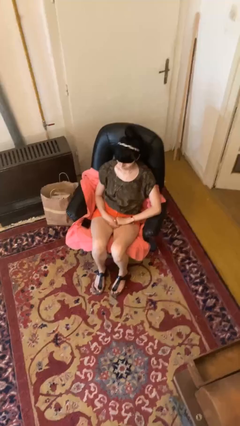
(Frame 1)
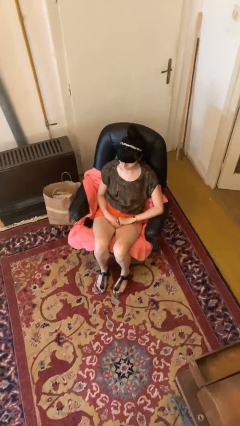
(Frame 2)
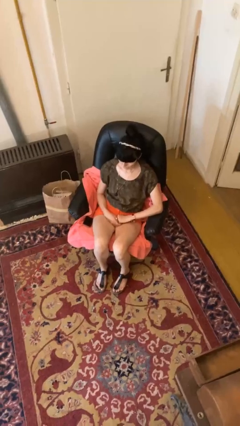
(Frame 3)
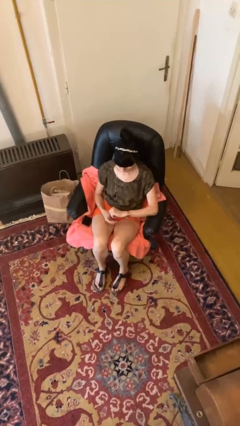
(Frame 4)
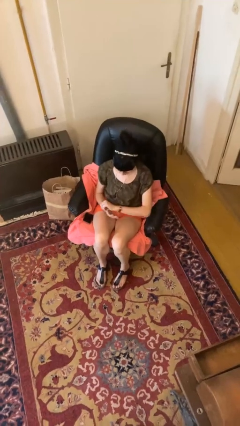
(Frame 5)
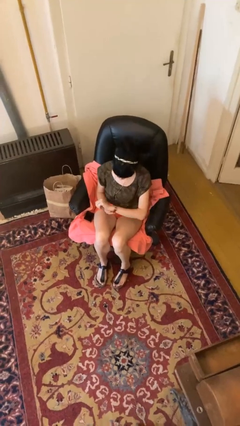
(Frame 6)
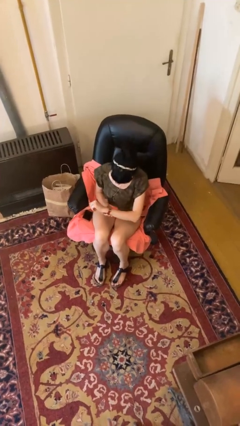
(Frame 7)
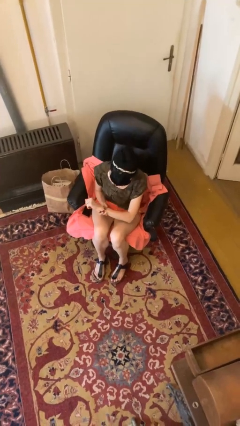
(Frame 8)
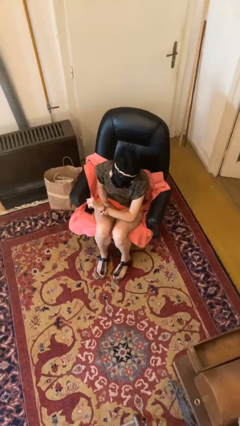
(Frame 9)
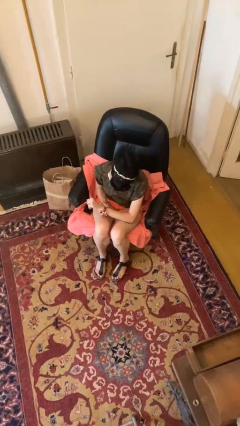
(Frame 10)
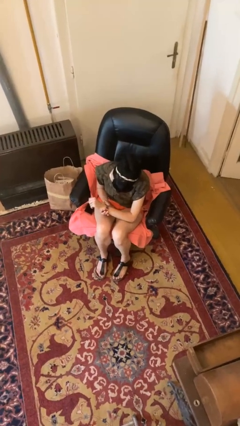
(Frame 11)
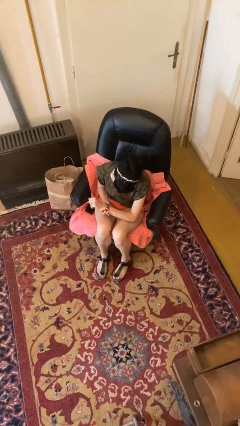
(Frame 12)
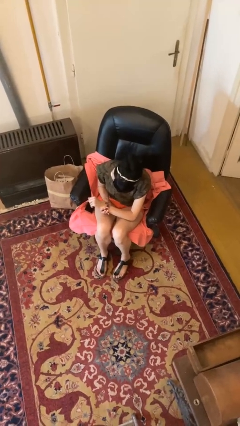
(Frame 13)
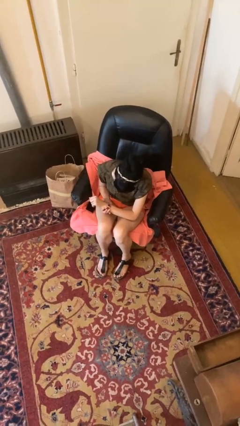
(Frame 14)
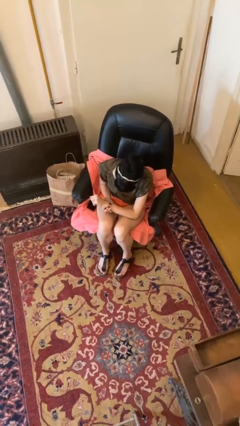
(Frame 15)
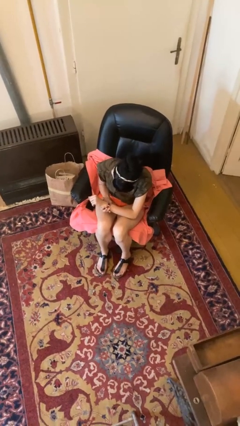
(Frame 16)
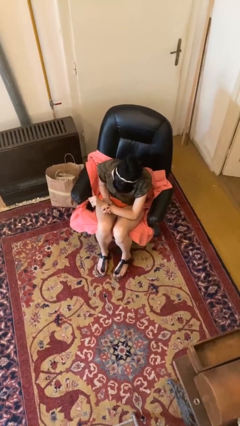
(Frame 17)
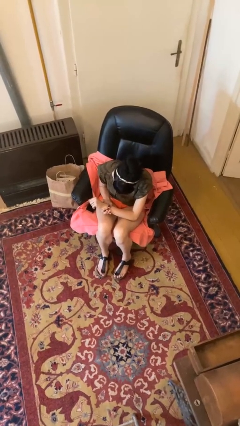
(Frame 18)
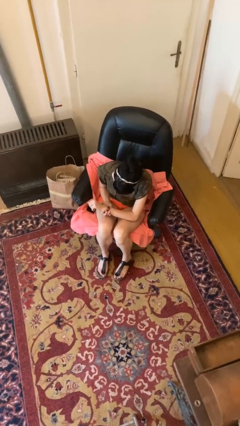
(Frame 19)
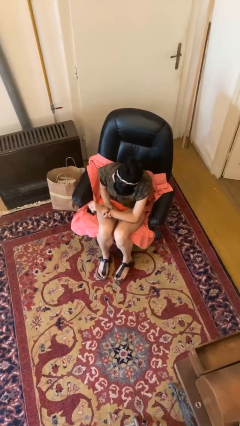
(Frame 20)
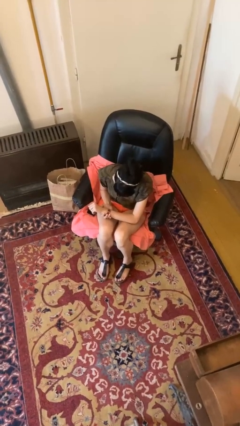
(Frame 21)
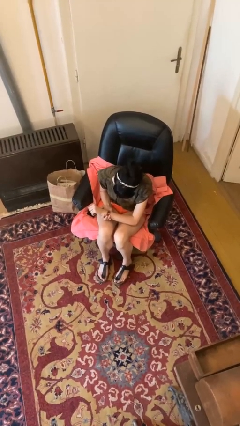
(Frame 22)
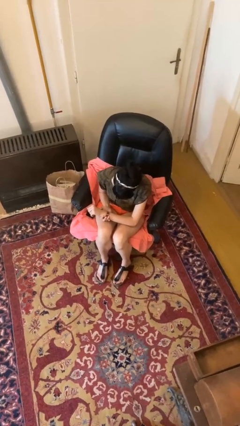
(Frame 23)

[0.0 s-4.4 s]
person looks at wristwatch

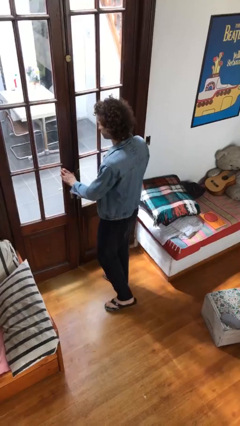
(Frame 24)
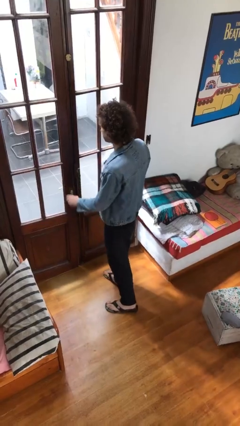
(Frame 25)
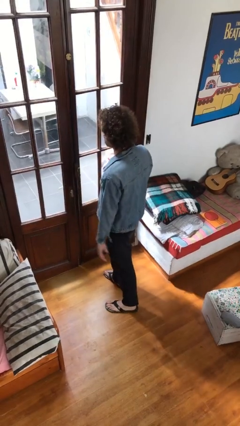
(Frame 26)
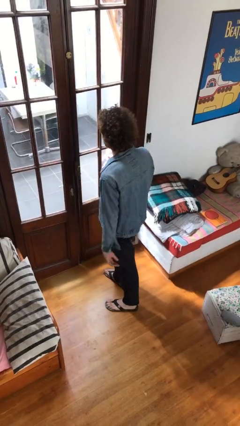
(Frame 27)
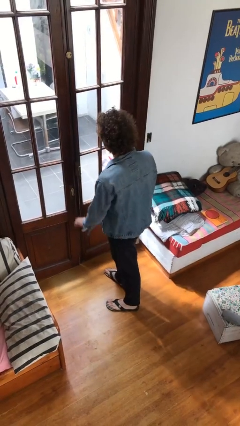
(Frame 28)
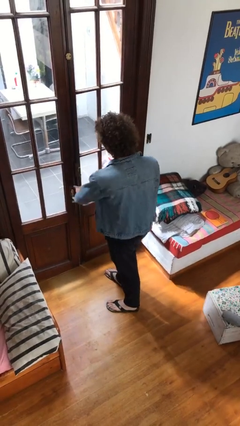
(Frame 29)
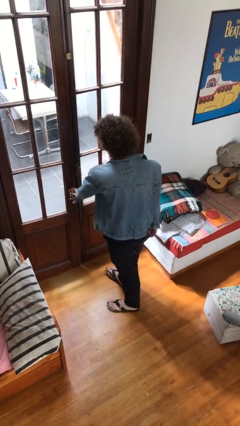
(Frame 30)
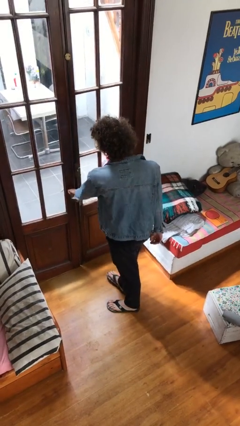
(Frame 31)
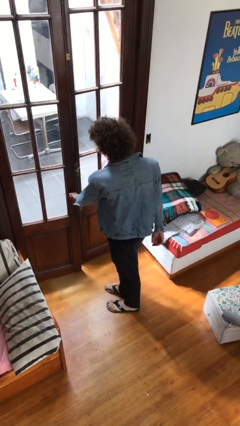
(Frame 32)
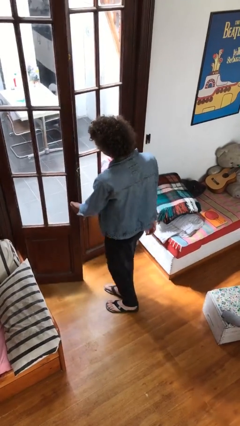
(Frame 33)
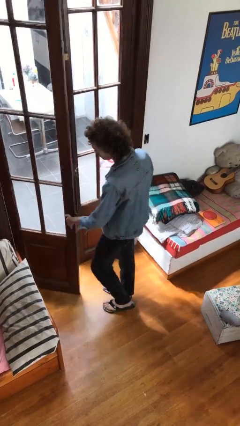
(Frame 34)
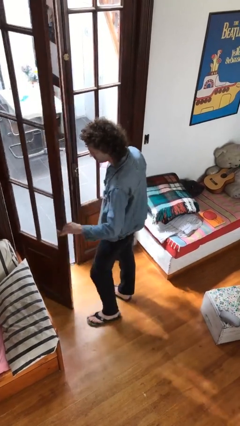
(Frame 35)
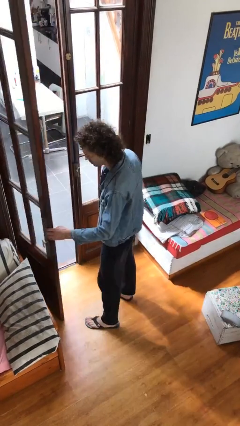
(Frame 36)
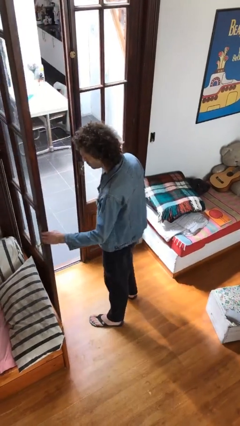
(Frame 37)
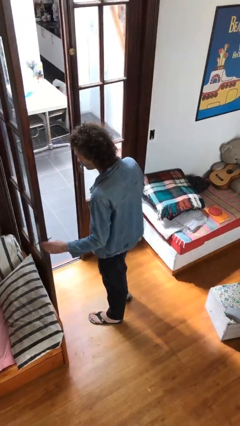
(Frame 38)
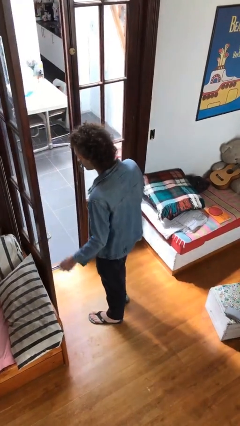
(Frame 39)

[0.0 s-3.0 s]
person opens facility door

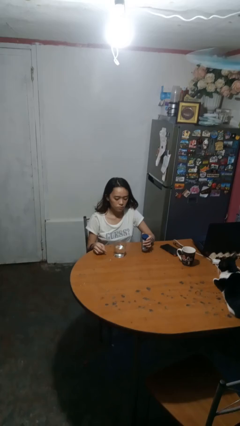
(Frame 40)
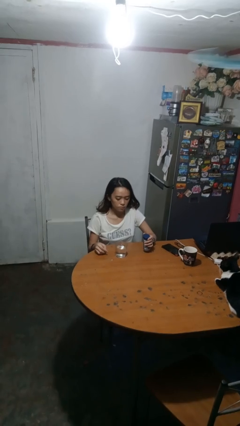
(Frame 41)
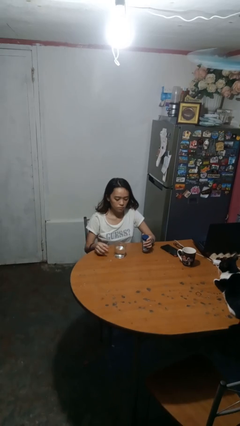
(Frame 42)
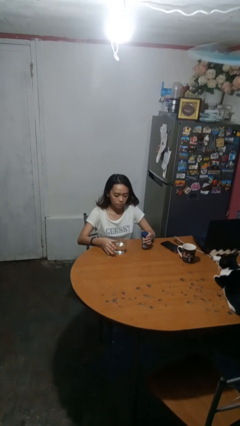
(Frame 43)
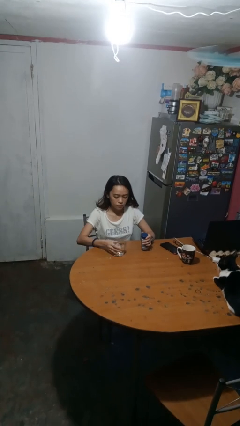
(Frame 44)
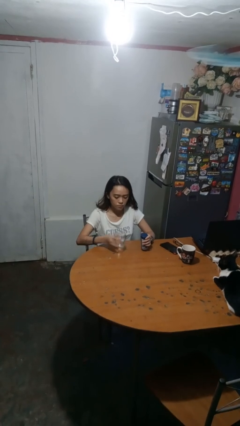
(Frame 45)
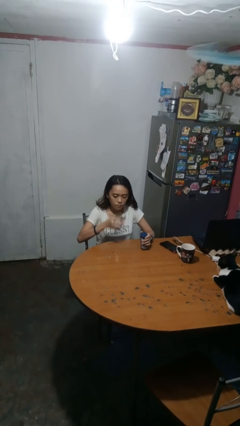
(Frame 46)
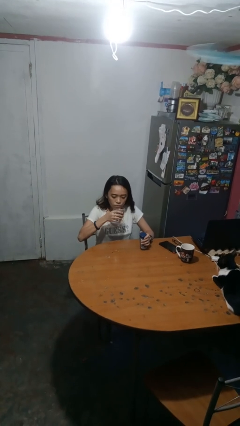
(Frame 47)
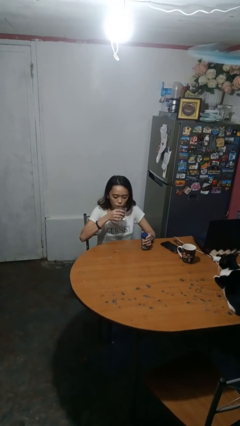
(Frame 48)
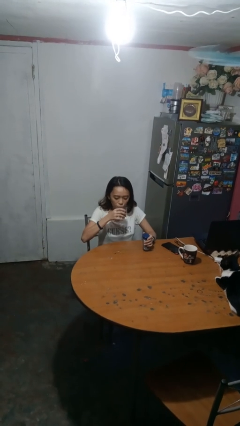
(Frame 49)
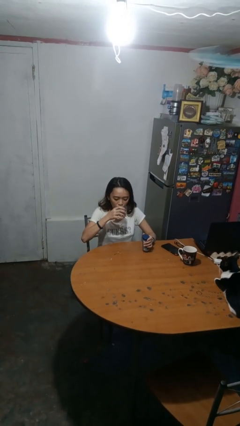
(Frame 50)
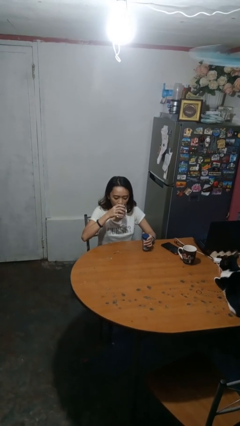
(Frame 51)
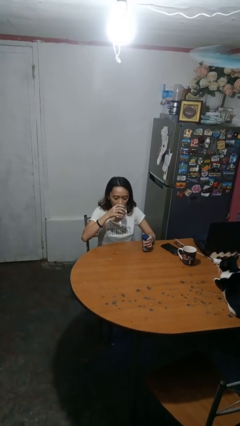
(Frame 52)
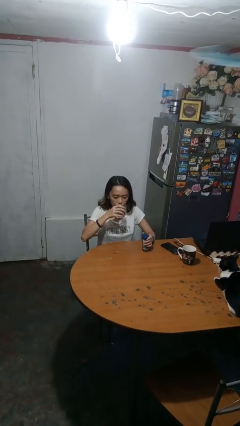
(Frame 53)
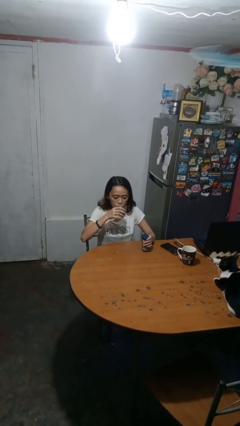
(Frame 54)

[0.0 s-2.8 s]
person drinks from cup

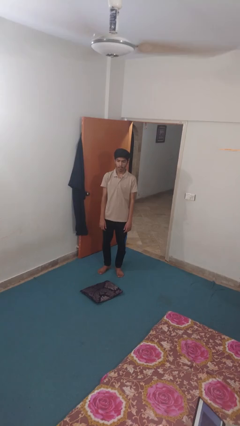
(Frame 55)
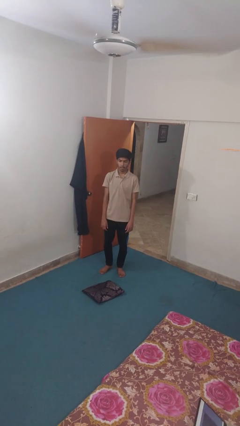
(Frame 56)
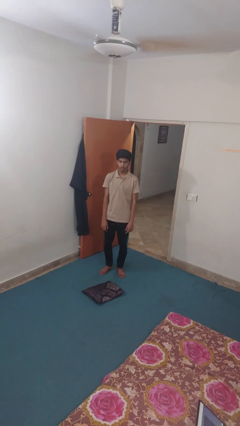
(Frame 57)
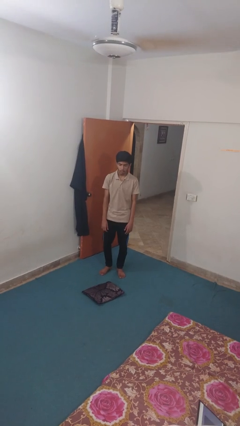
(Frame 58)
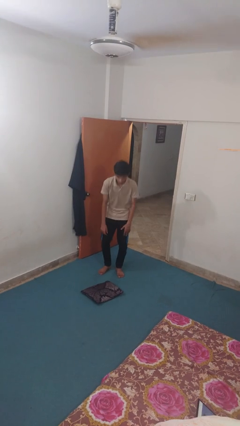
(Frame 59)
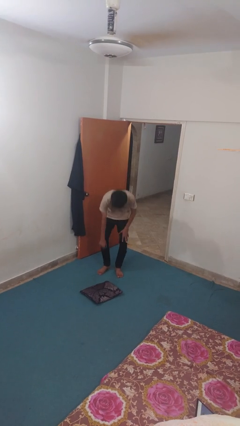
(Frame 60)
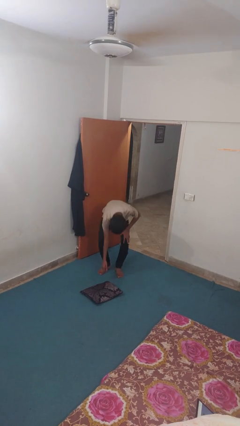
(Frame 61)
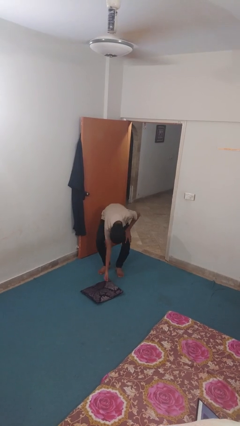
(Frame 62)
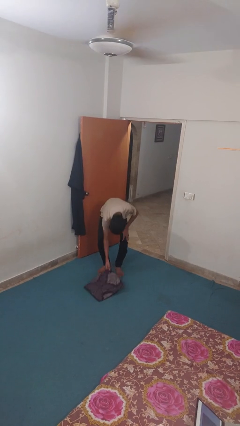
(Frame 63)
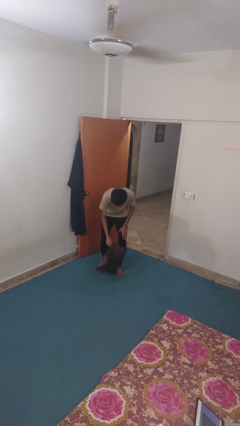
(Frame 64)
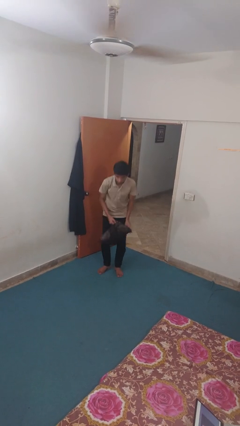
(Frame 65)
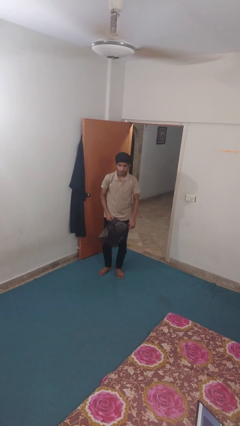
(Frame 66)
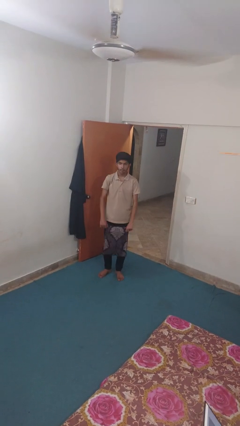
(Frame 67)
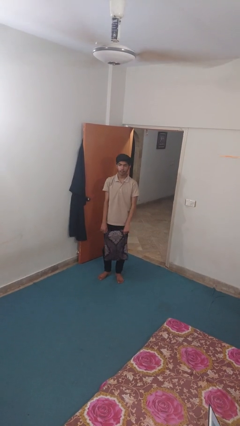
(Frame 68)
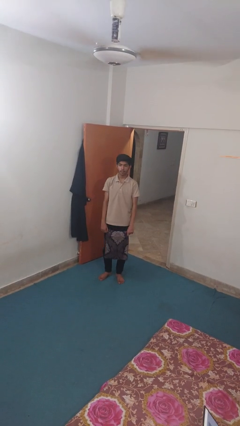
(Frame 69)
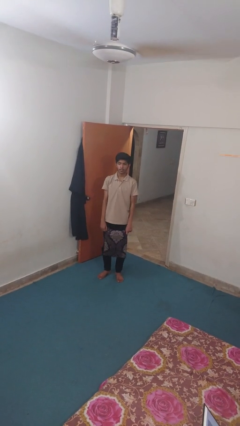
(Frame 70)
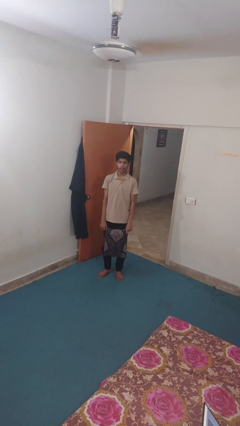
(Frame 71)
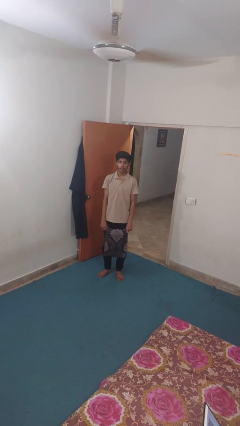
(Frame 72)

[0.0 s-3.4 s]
person picks up object from floor

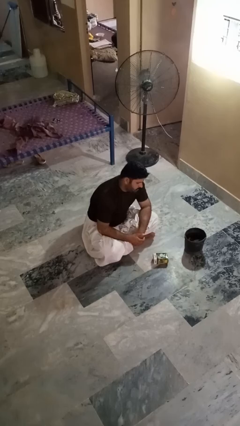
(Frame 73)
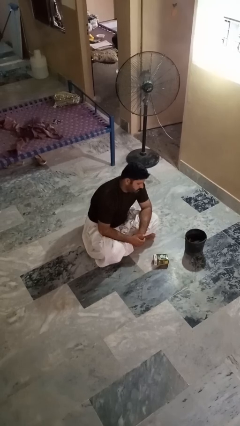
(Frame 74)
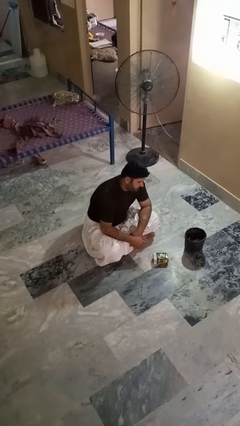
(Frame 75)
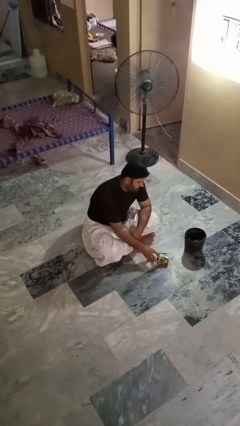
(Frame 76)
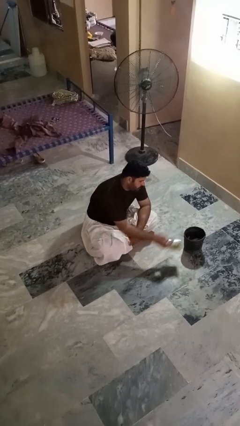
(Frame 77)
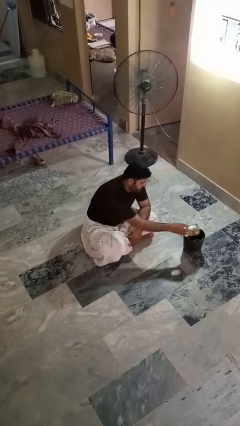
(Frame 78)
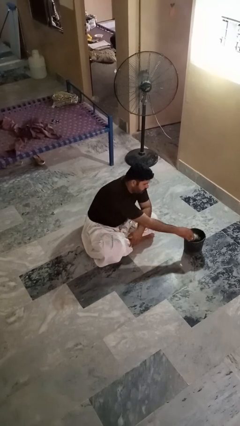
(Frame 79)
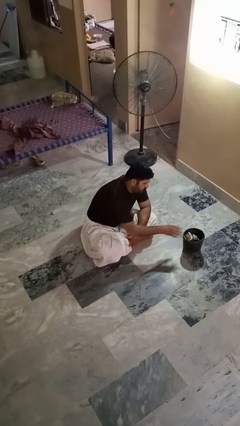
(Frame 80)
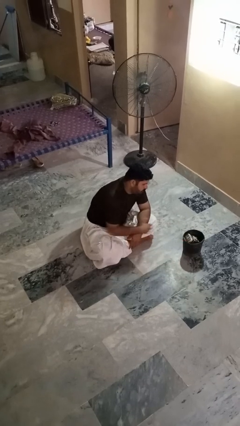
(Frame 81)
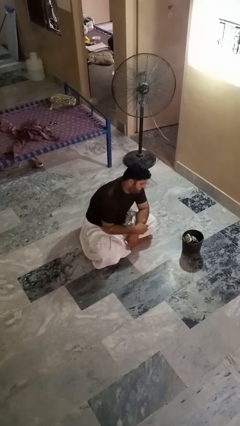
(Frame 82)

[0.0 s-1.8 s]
person puts object into basket

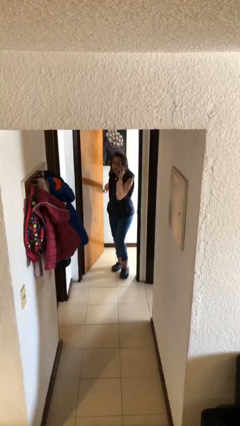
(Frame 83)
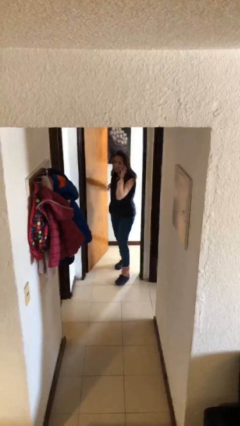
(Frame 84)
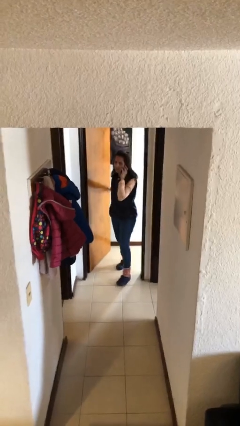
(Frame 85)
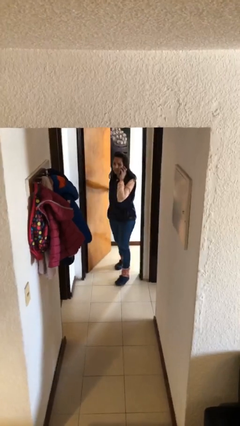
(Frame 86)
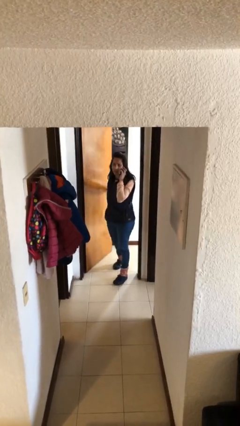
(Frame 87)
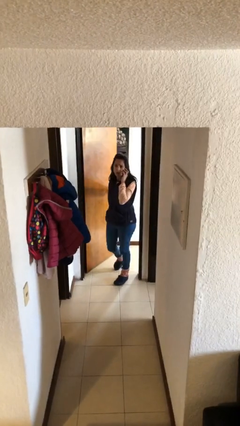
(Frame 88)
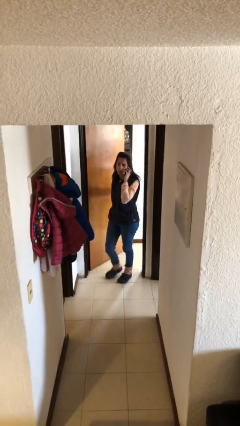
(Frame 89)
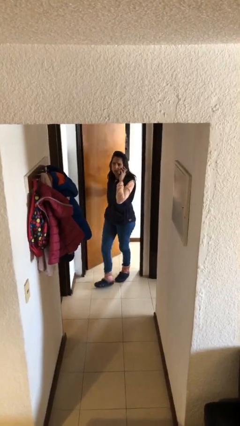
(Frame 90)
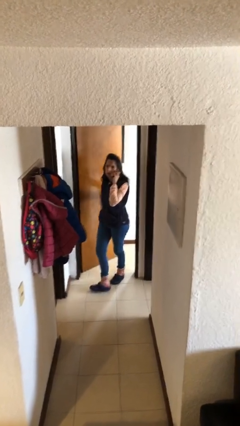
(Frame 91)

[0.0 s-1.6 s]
person enters scene through structure
